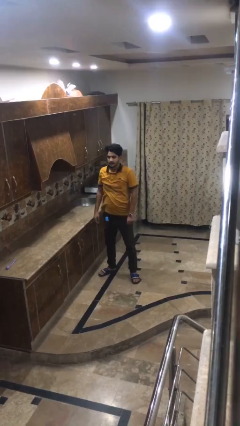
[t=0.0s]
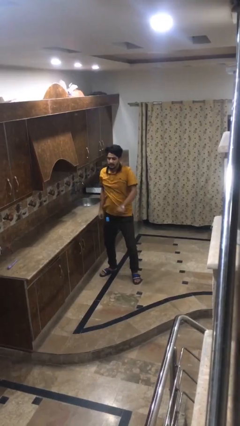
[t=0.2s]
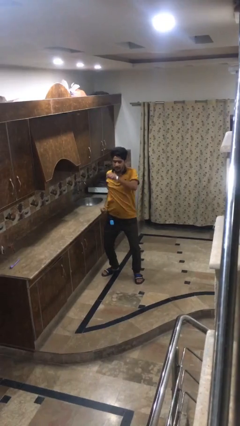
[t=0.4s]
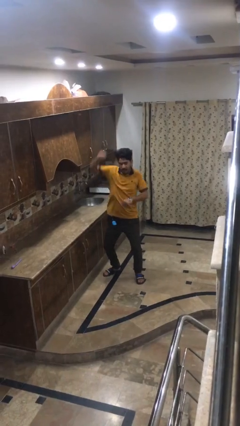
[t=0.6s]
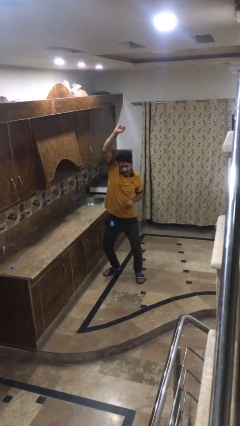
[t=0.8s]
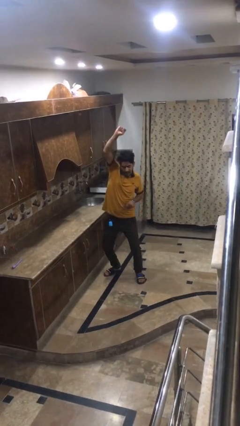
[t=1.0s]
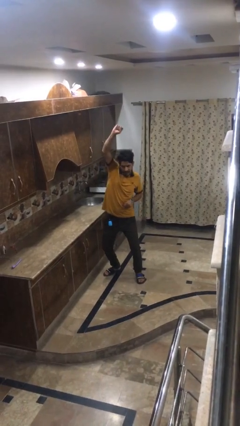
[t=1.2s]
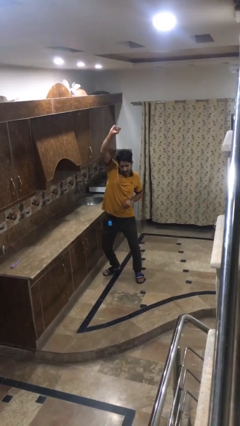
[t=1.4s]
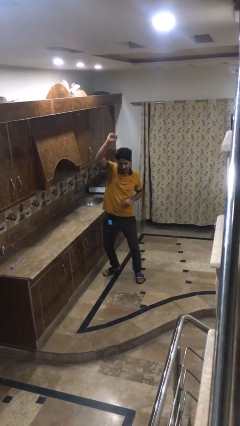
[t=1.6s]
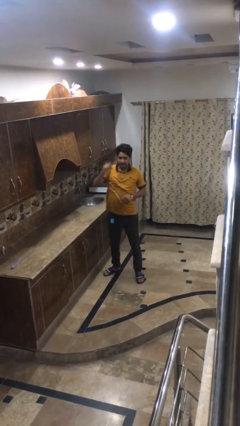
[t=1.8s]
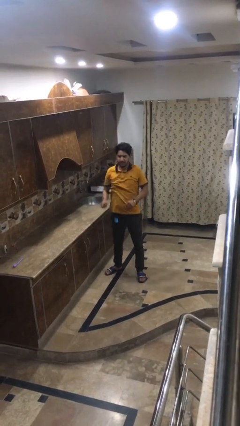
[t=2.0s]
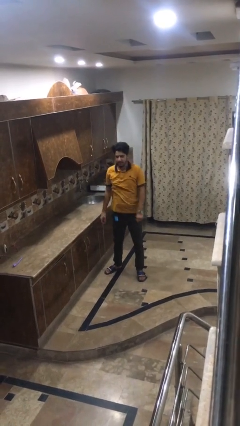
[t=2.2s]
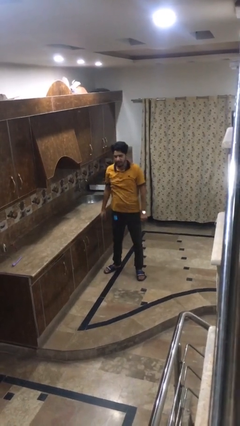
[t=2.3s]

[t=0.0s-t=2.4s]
person punches

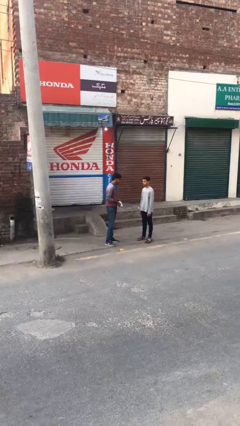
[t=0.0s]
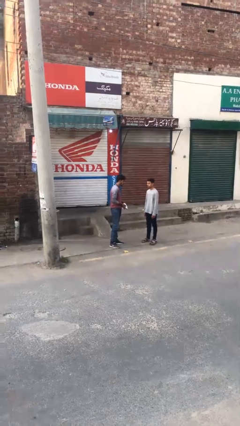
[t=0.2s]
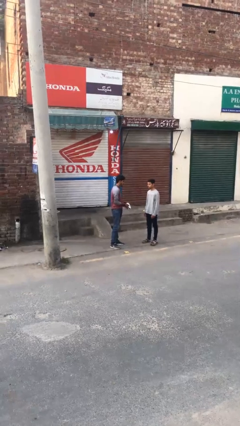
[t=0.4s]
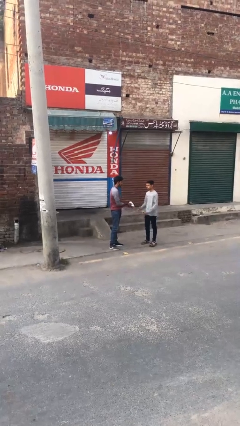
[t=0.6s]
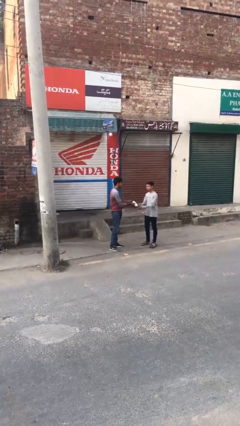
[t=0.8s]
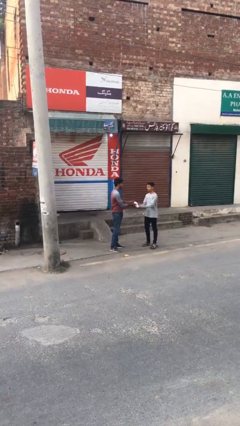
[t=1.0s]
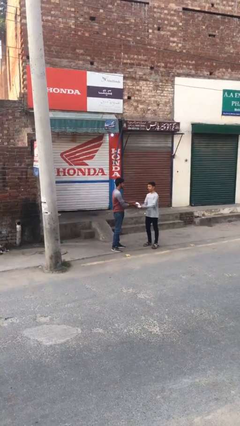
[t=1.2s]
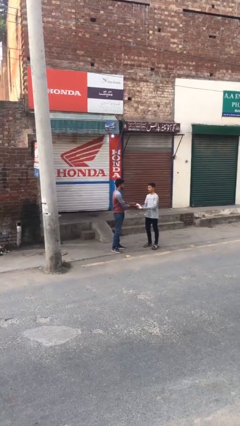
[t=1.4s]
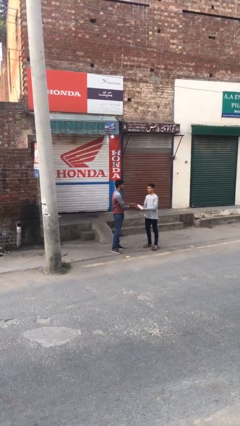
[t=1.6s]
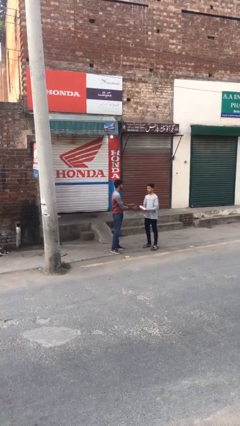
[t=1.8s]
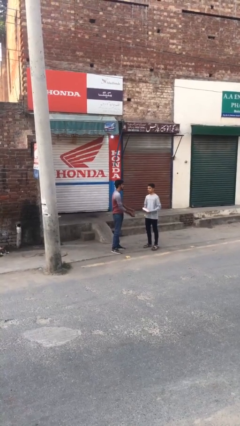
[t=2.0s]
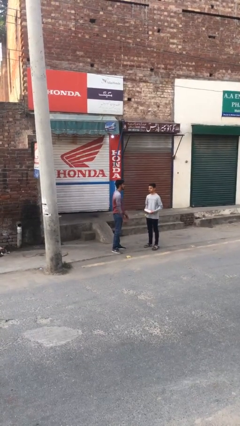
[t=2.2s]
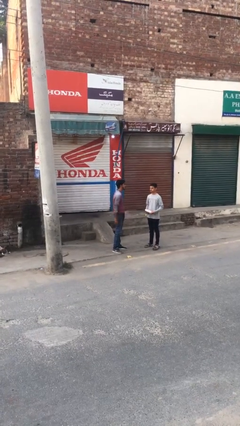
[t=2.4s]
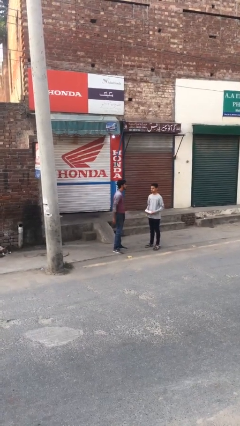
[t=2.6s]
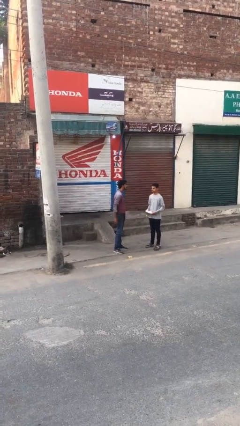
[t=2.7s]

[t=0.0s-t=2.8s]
person transfers object to person

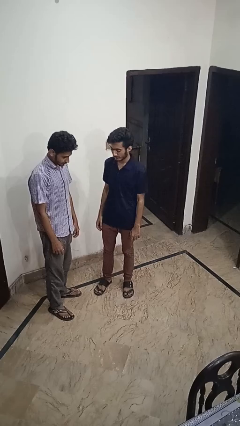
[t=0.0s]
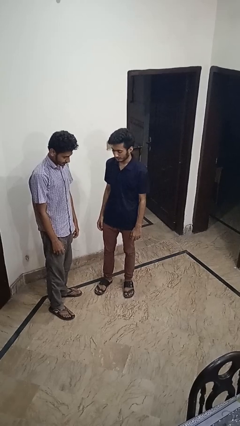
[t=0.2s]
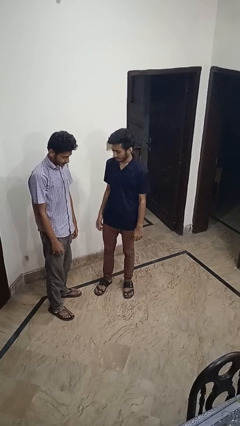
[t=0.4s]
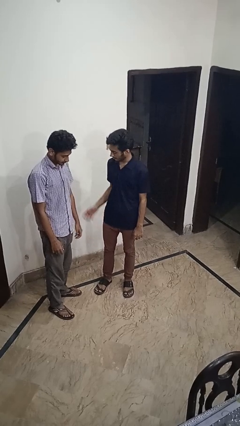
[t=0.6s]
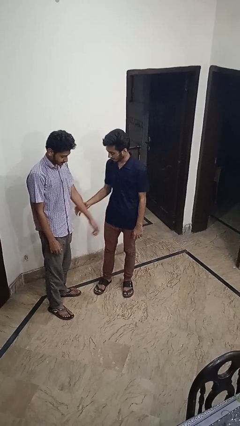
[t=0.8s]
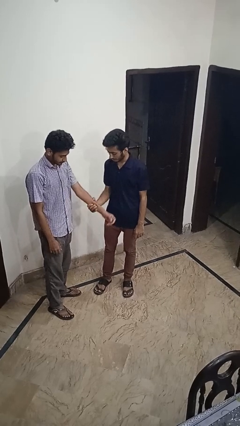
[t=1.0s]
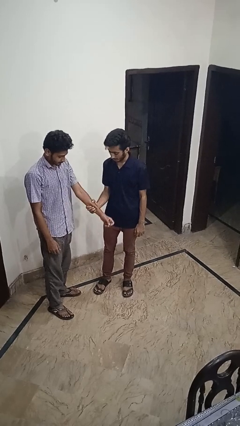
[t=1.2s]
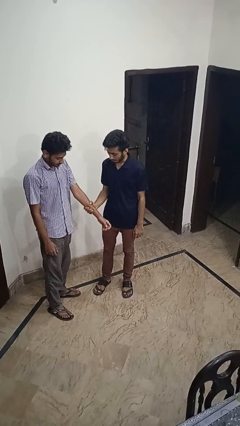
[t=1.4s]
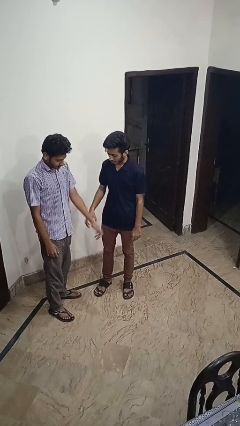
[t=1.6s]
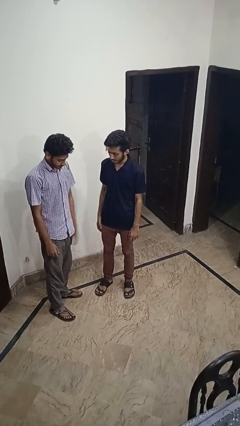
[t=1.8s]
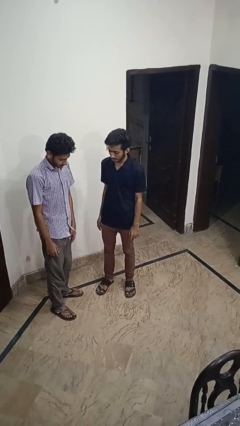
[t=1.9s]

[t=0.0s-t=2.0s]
person grabs person by forearm

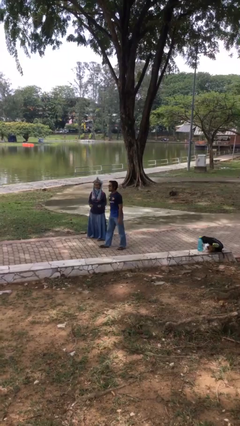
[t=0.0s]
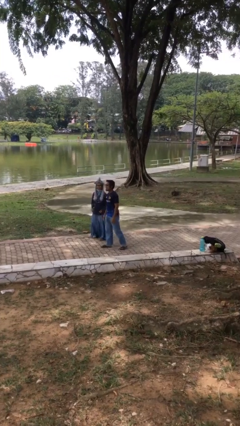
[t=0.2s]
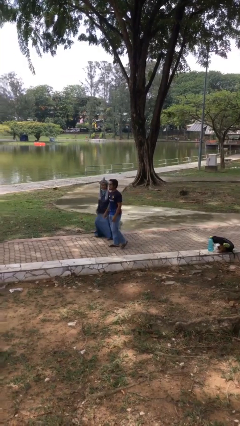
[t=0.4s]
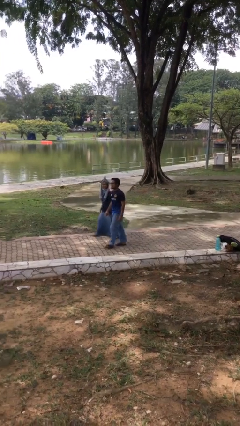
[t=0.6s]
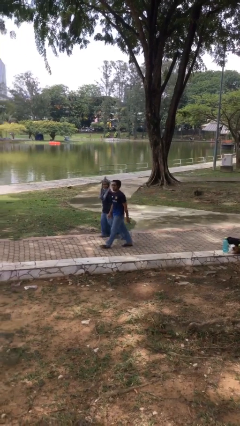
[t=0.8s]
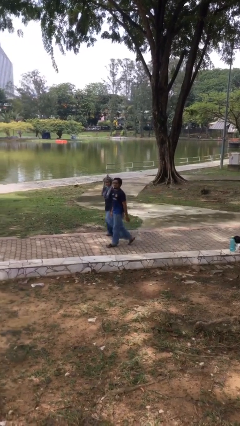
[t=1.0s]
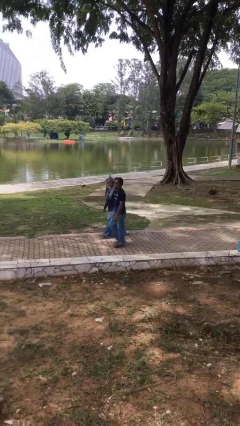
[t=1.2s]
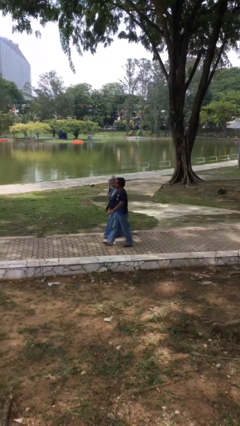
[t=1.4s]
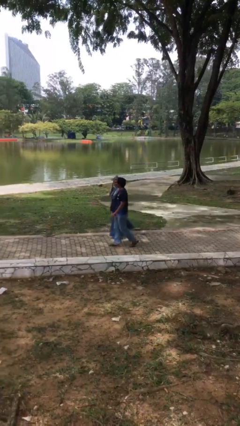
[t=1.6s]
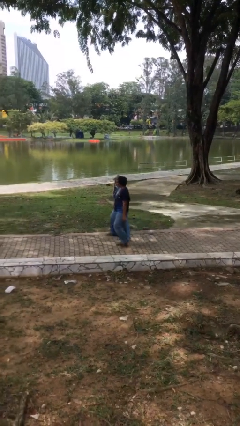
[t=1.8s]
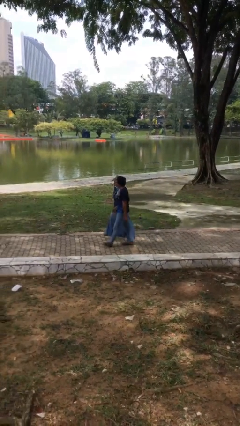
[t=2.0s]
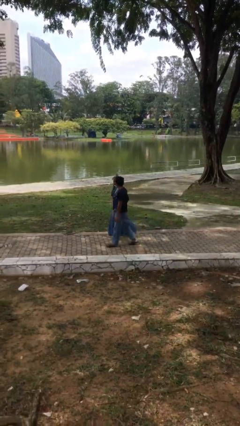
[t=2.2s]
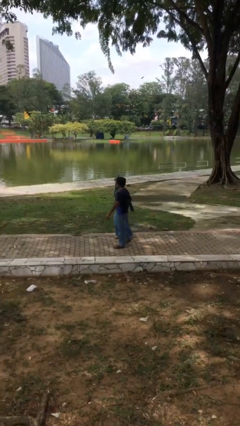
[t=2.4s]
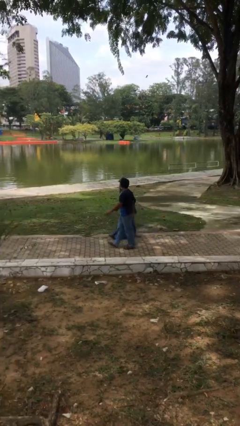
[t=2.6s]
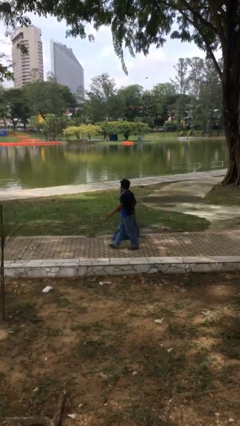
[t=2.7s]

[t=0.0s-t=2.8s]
person talks to person

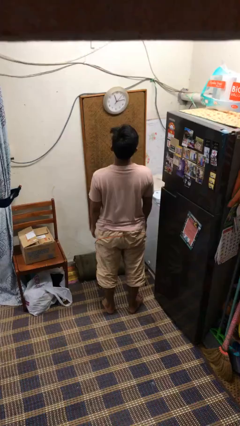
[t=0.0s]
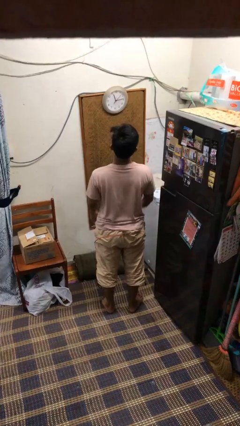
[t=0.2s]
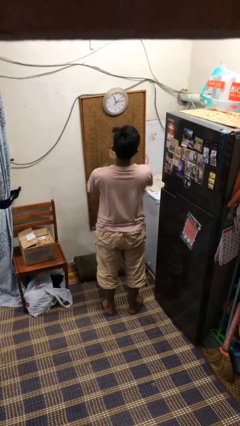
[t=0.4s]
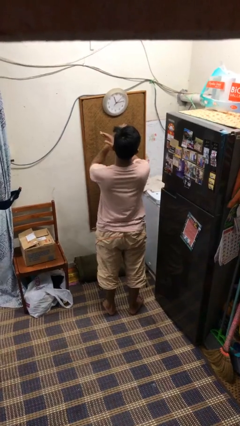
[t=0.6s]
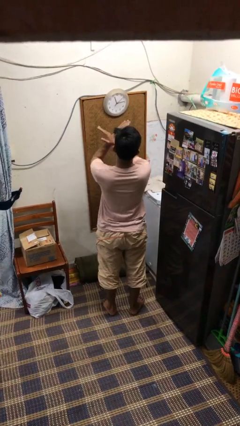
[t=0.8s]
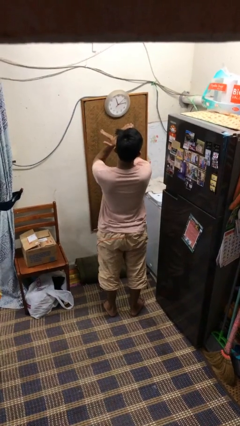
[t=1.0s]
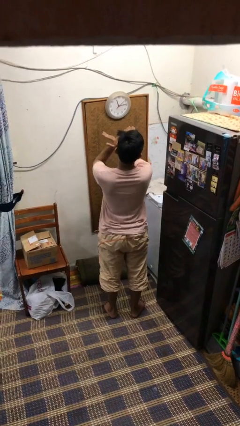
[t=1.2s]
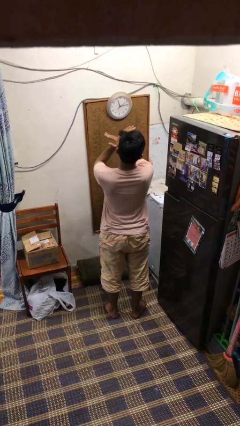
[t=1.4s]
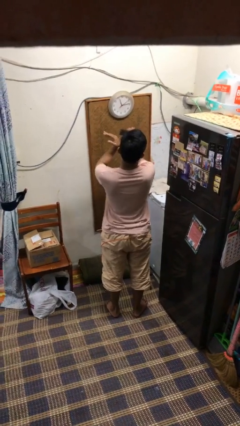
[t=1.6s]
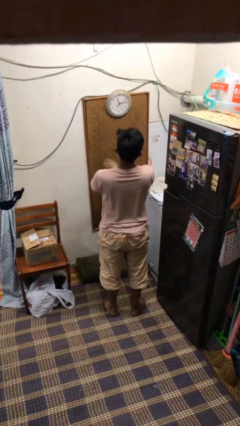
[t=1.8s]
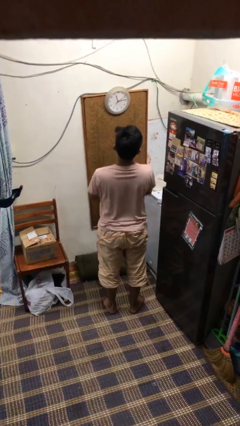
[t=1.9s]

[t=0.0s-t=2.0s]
person gestures arms x

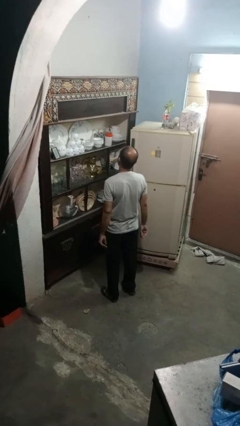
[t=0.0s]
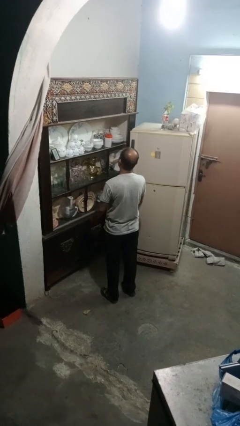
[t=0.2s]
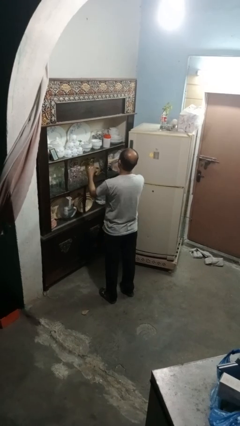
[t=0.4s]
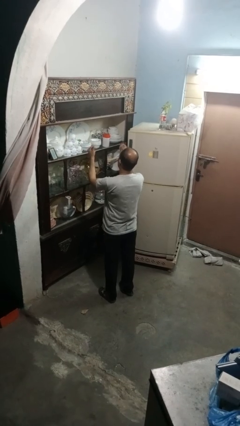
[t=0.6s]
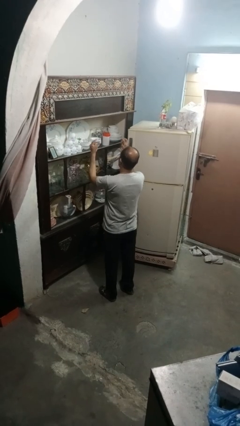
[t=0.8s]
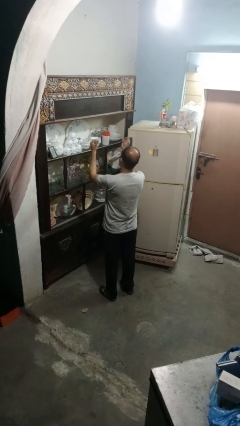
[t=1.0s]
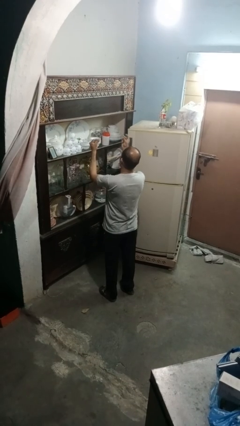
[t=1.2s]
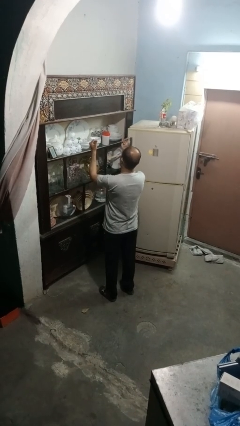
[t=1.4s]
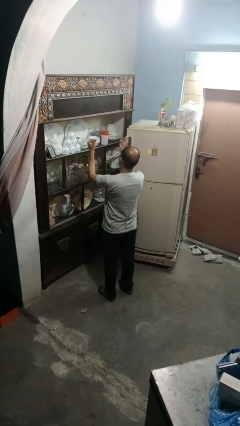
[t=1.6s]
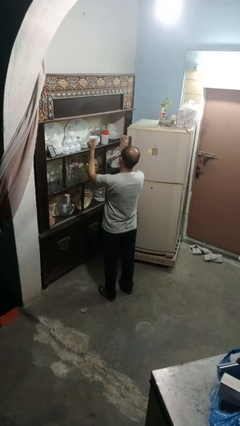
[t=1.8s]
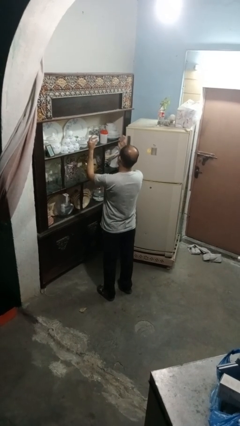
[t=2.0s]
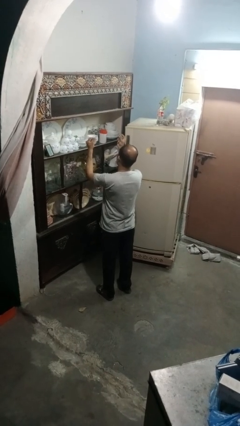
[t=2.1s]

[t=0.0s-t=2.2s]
person snaps fingers

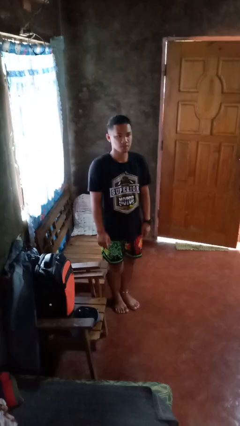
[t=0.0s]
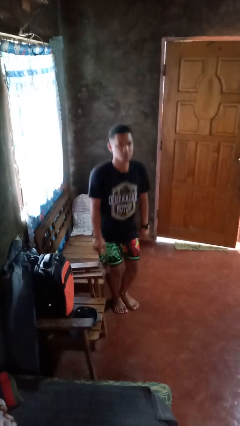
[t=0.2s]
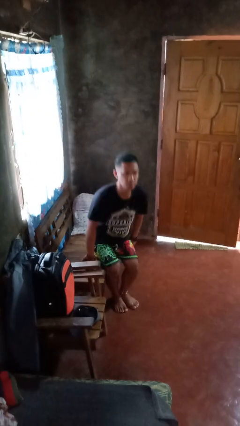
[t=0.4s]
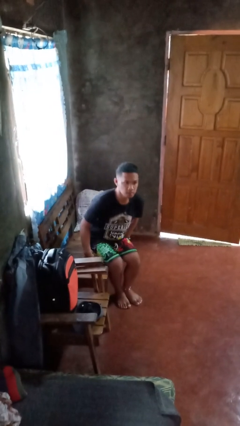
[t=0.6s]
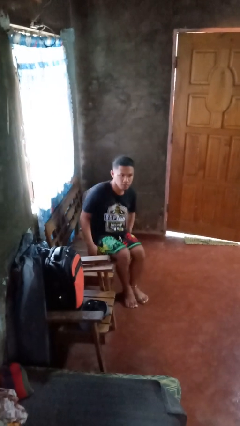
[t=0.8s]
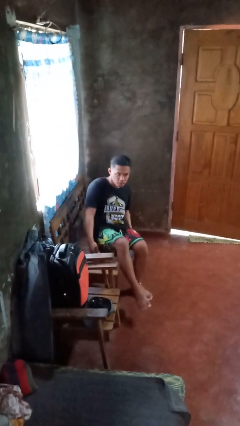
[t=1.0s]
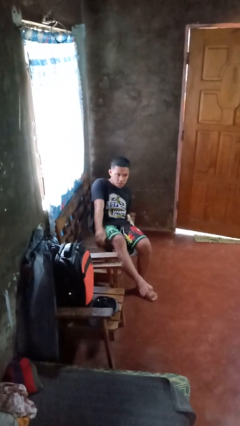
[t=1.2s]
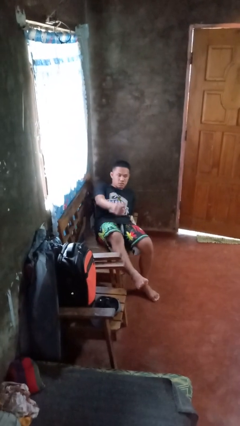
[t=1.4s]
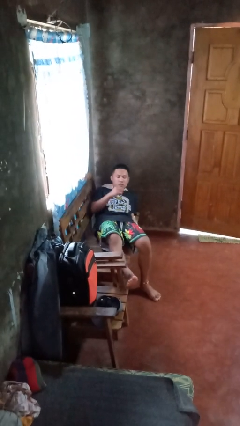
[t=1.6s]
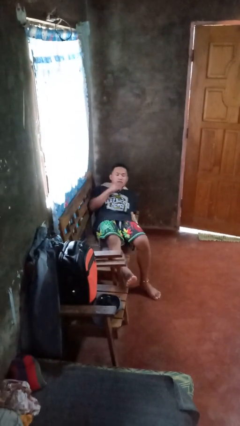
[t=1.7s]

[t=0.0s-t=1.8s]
person lies down on couch

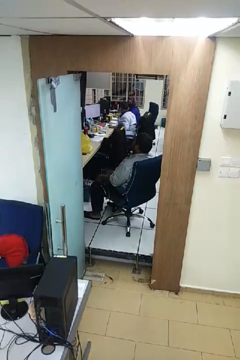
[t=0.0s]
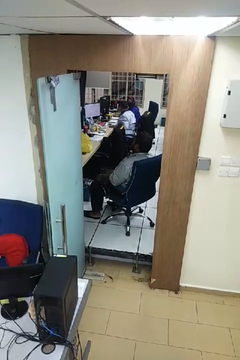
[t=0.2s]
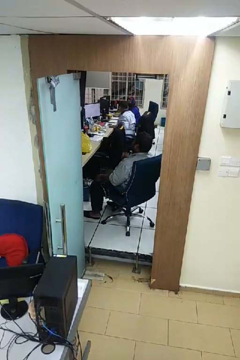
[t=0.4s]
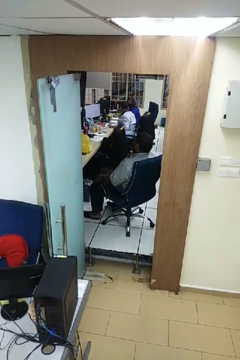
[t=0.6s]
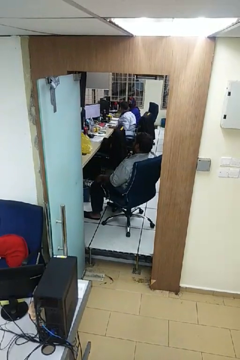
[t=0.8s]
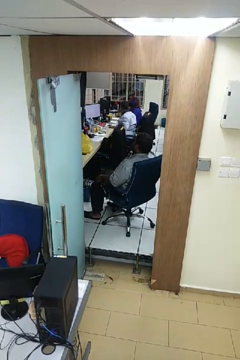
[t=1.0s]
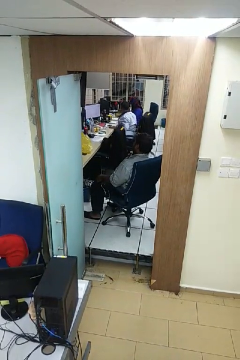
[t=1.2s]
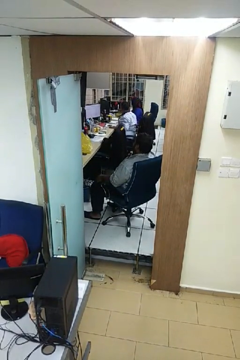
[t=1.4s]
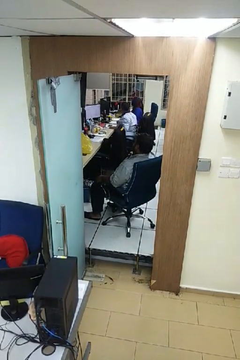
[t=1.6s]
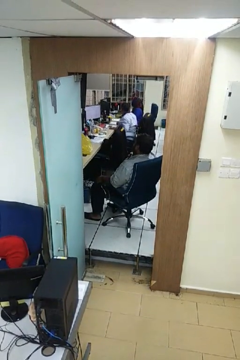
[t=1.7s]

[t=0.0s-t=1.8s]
person scratches face
